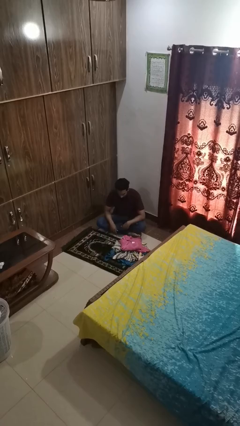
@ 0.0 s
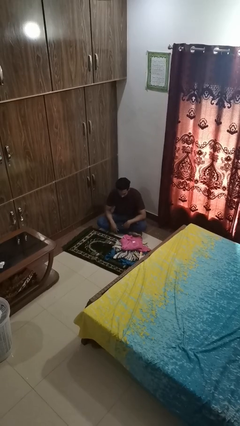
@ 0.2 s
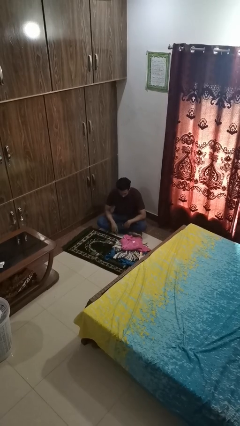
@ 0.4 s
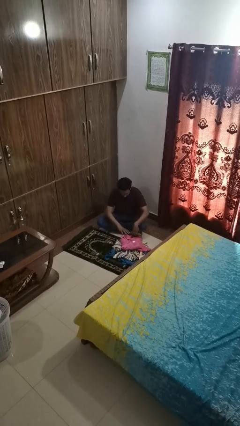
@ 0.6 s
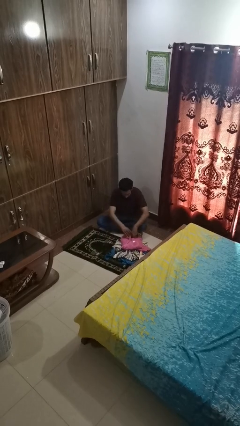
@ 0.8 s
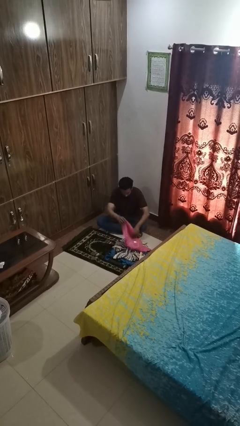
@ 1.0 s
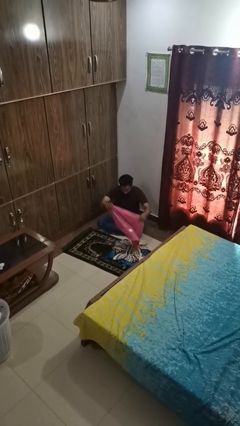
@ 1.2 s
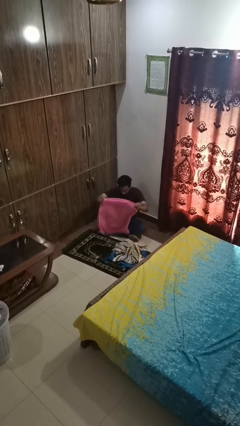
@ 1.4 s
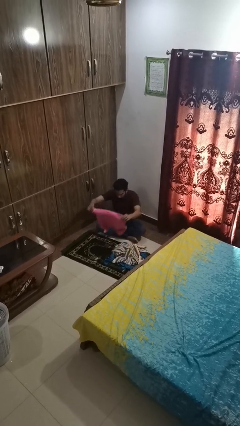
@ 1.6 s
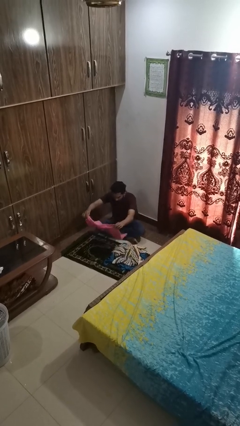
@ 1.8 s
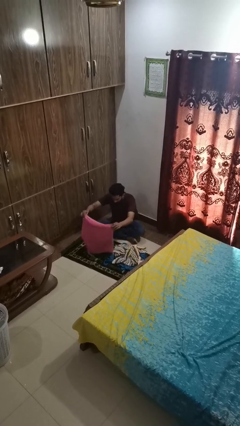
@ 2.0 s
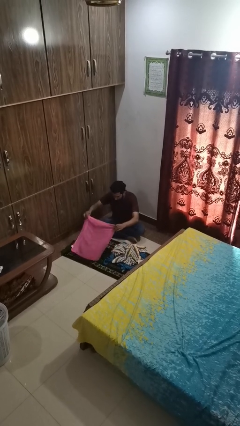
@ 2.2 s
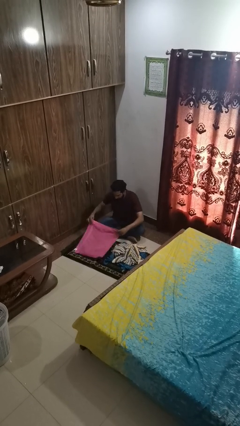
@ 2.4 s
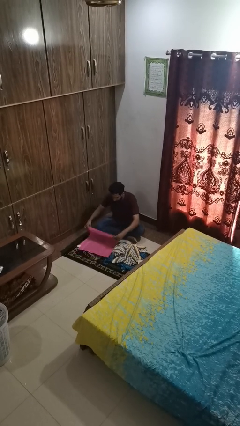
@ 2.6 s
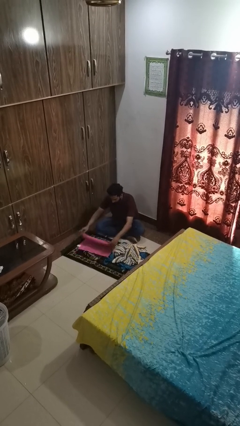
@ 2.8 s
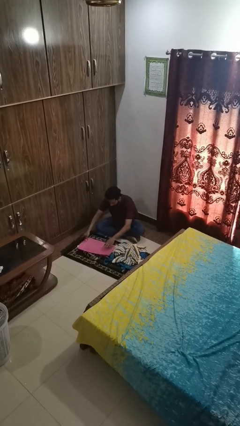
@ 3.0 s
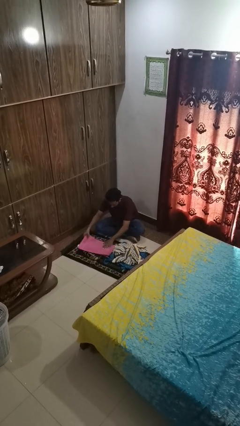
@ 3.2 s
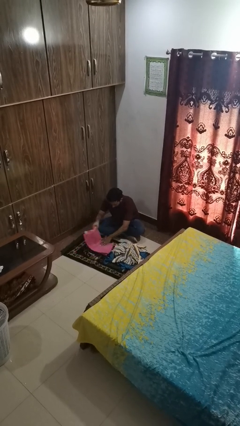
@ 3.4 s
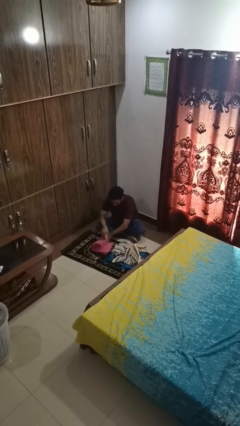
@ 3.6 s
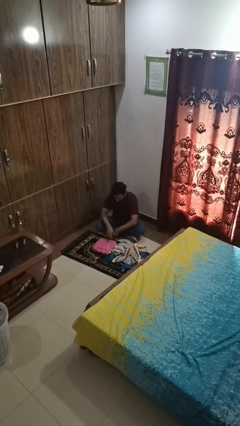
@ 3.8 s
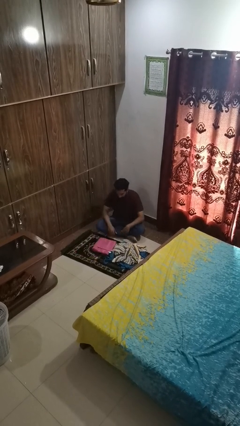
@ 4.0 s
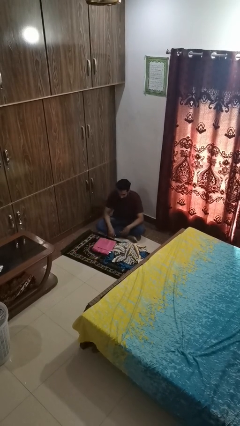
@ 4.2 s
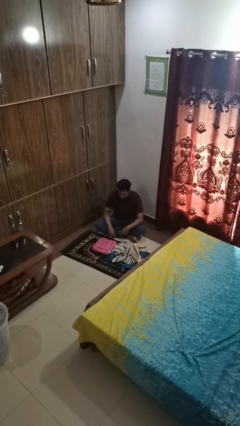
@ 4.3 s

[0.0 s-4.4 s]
person folds towel

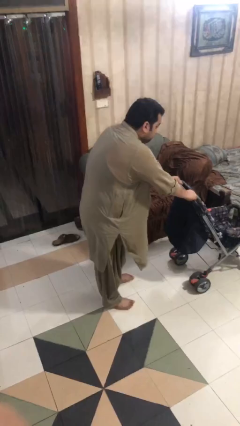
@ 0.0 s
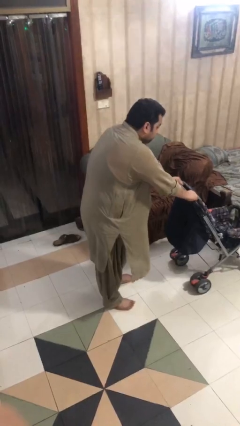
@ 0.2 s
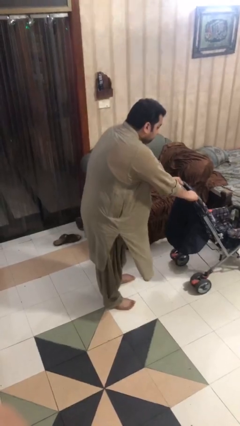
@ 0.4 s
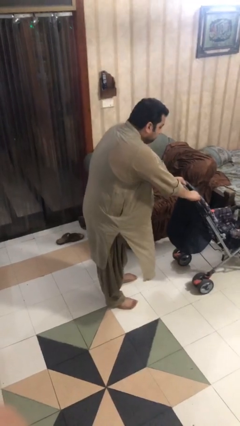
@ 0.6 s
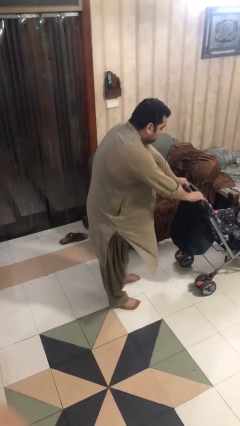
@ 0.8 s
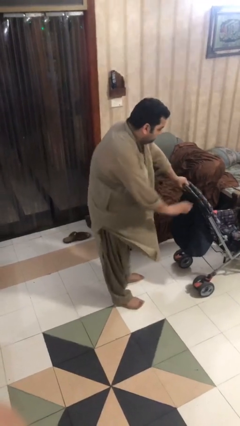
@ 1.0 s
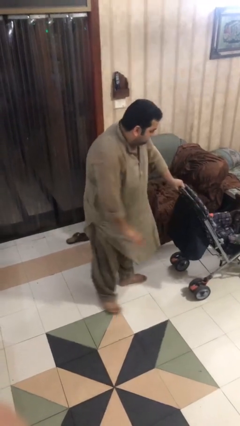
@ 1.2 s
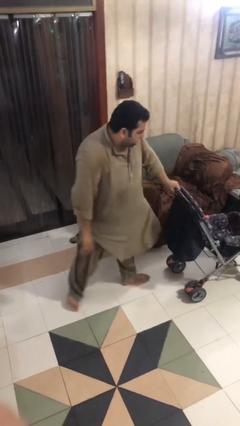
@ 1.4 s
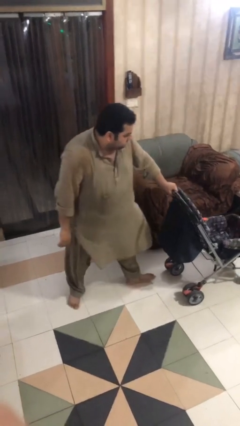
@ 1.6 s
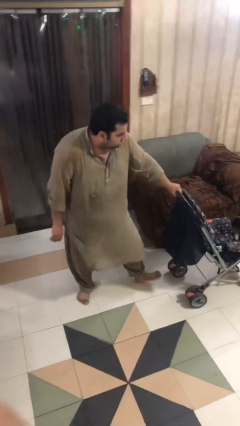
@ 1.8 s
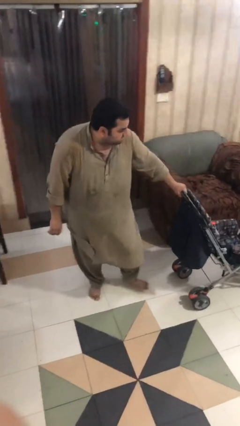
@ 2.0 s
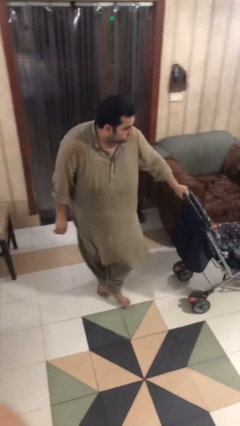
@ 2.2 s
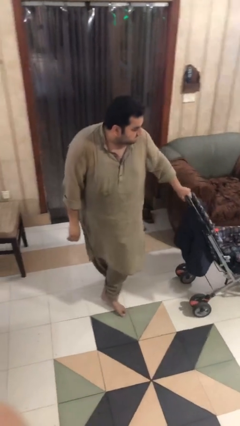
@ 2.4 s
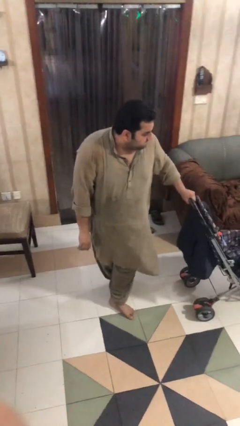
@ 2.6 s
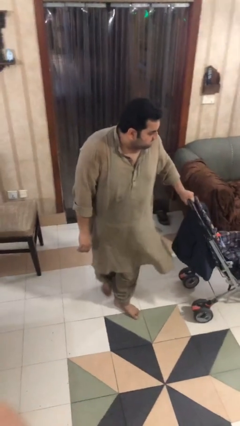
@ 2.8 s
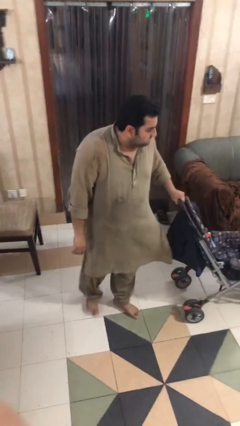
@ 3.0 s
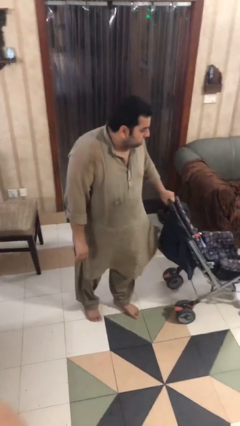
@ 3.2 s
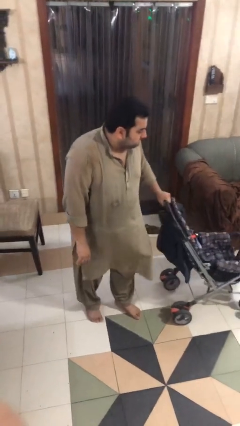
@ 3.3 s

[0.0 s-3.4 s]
person pulls wheeled cart

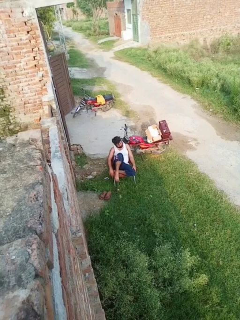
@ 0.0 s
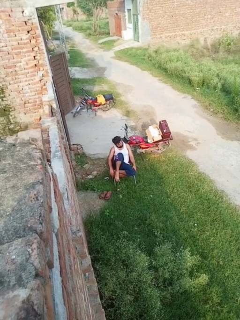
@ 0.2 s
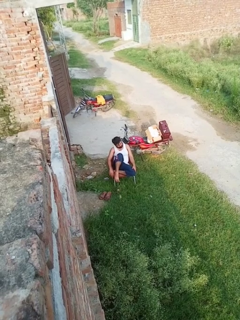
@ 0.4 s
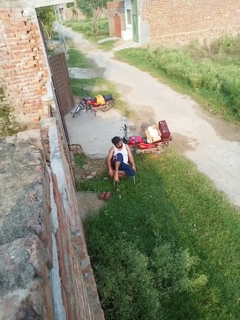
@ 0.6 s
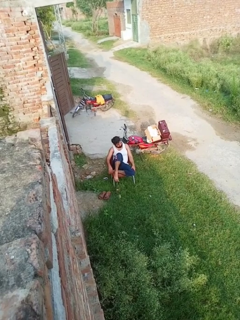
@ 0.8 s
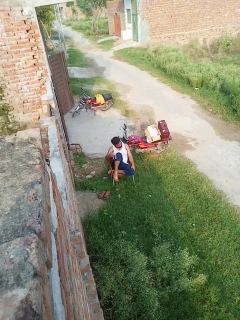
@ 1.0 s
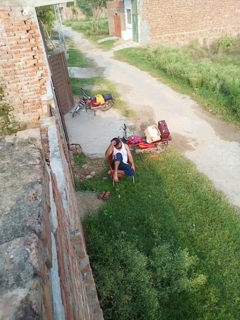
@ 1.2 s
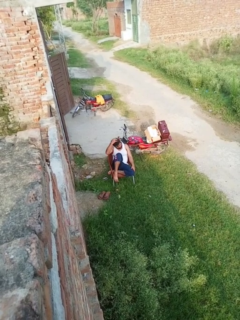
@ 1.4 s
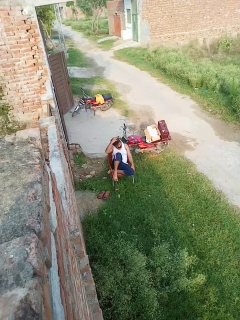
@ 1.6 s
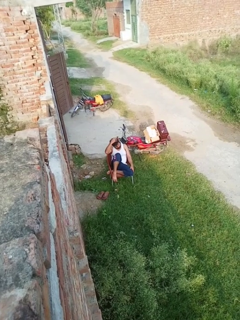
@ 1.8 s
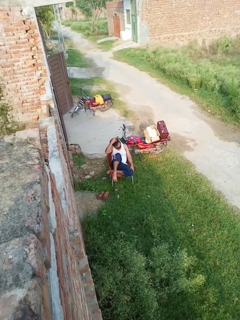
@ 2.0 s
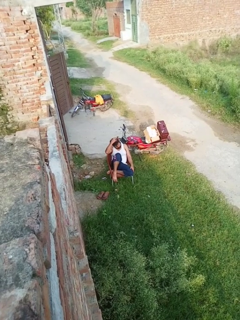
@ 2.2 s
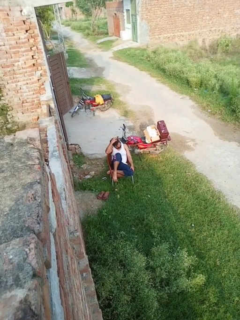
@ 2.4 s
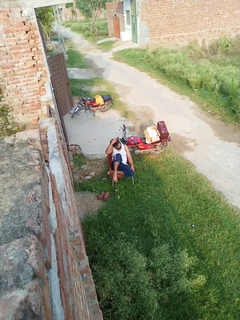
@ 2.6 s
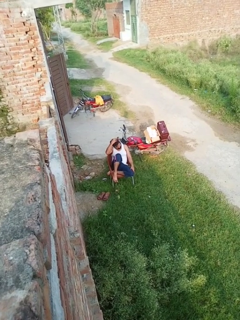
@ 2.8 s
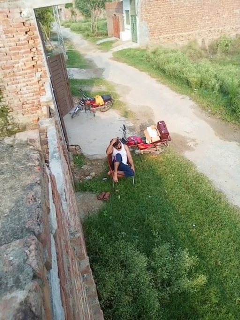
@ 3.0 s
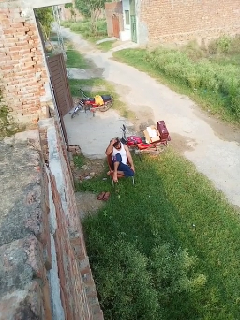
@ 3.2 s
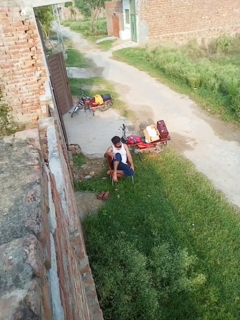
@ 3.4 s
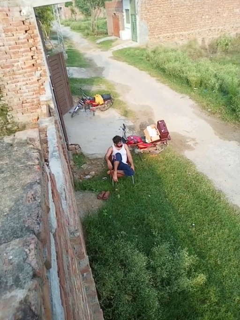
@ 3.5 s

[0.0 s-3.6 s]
person scratches face

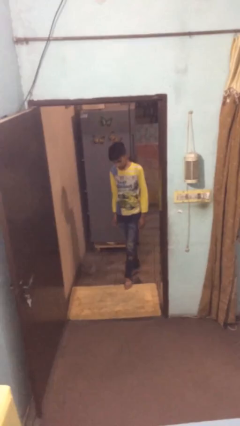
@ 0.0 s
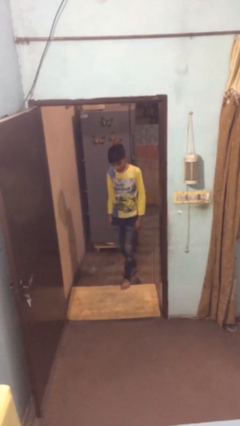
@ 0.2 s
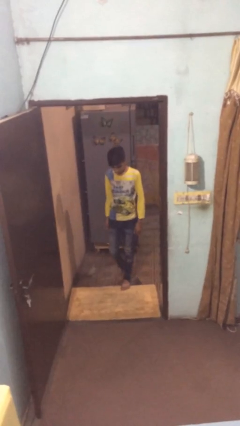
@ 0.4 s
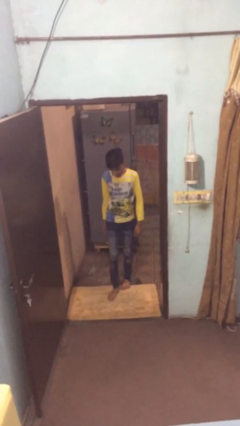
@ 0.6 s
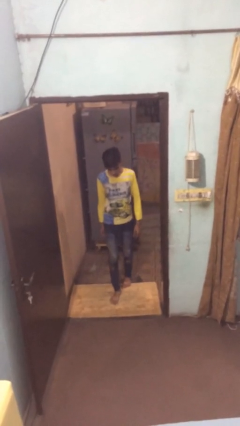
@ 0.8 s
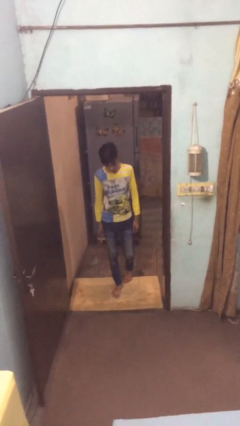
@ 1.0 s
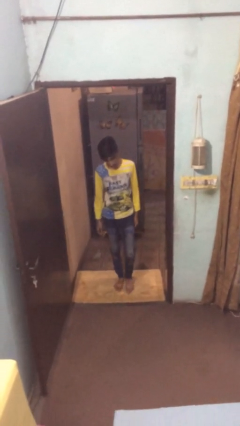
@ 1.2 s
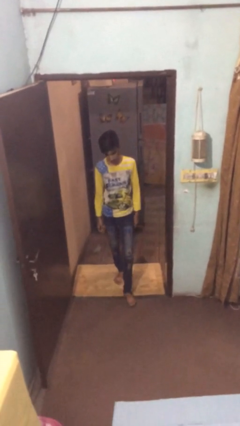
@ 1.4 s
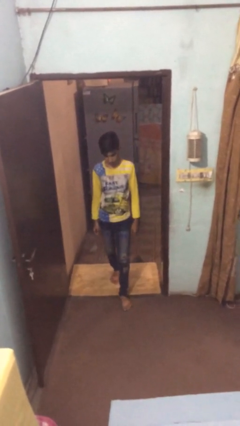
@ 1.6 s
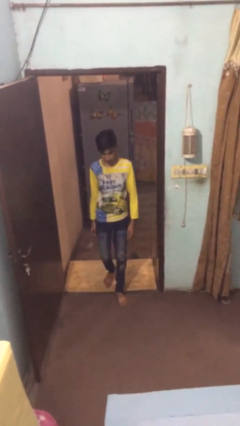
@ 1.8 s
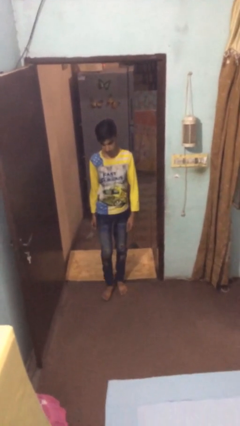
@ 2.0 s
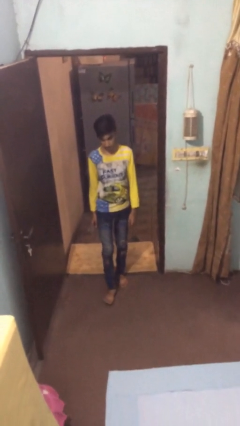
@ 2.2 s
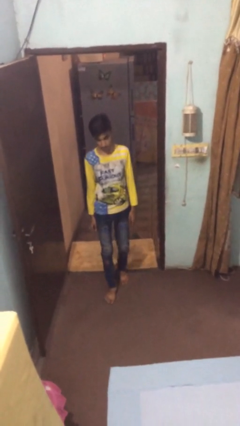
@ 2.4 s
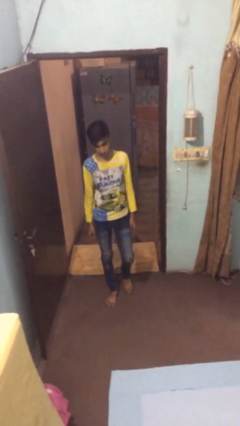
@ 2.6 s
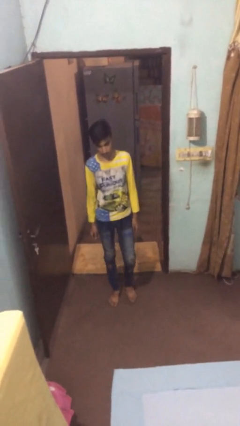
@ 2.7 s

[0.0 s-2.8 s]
person enters scene through structure

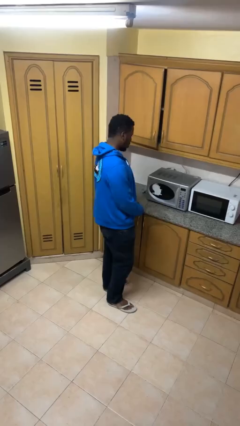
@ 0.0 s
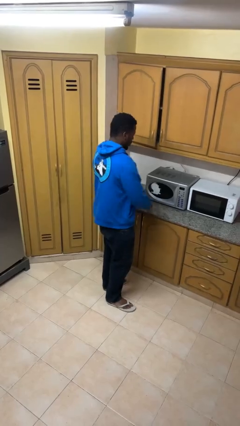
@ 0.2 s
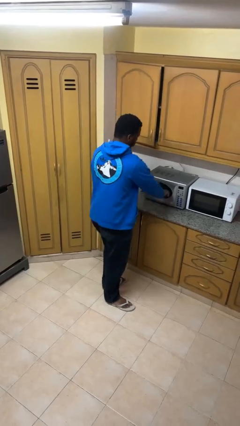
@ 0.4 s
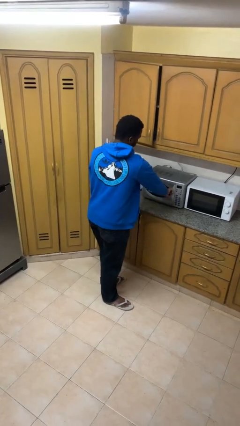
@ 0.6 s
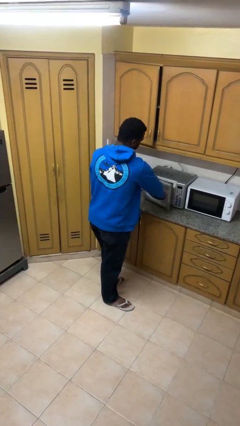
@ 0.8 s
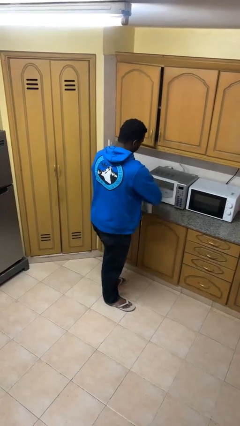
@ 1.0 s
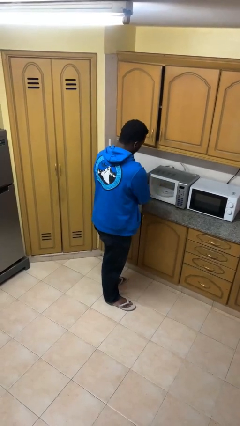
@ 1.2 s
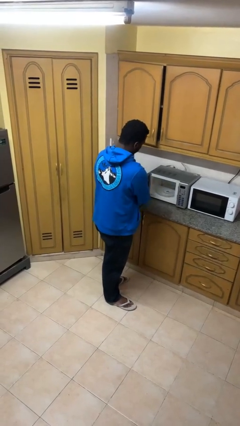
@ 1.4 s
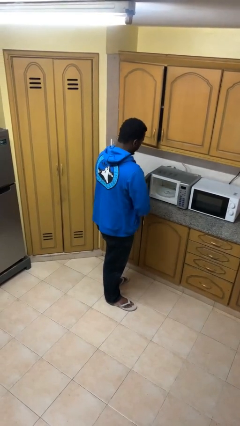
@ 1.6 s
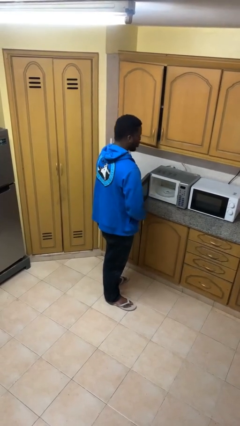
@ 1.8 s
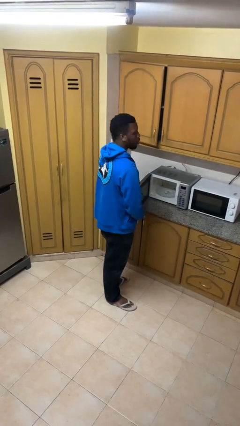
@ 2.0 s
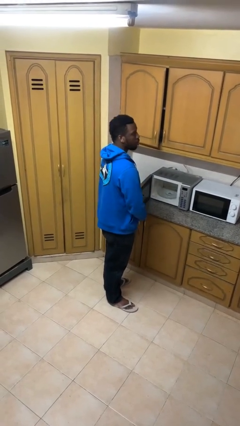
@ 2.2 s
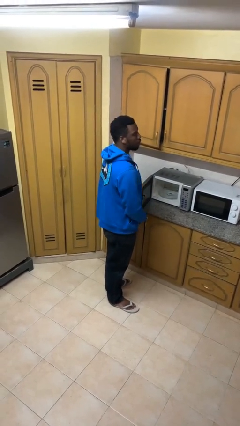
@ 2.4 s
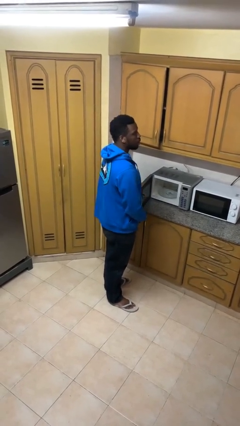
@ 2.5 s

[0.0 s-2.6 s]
person opens microwave

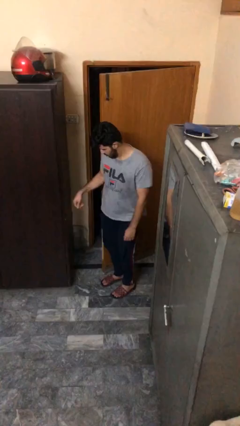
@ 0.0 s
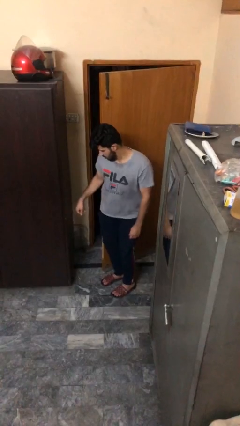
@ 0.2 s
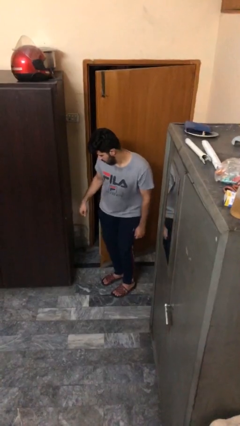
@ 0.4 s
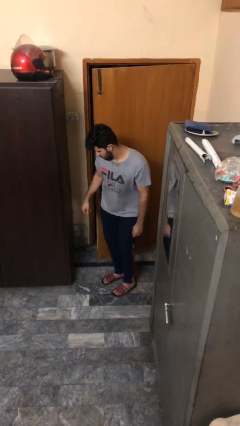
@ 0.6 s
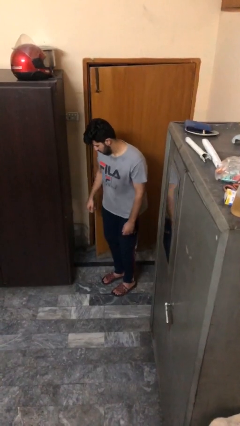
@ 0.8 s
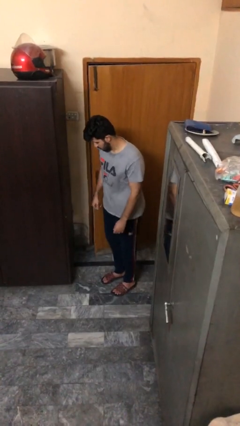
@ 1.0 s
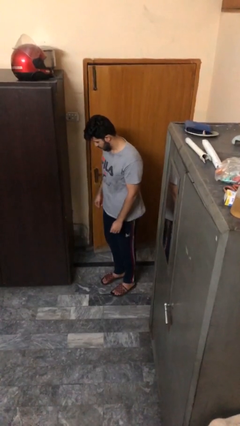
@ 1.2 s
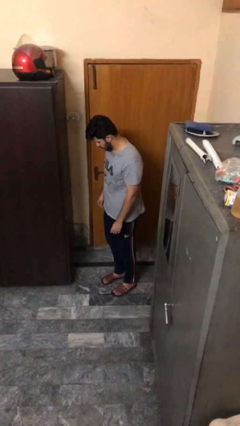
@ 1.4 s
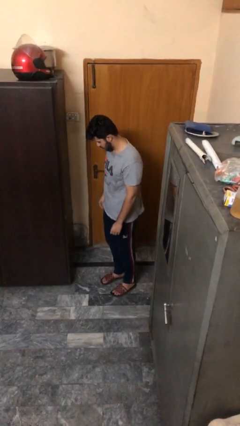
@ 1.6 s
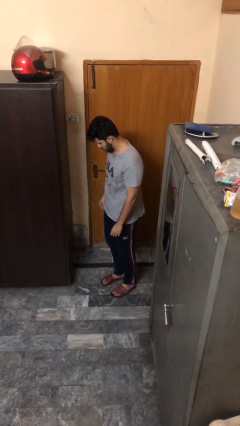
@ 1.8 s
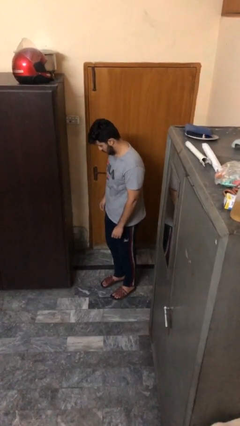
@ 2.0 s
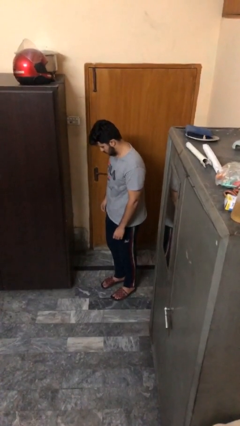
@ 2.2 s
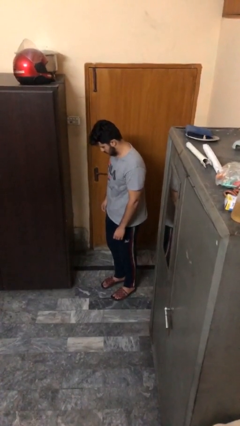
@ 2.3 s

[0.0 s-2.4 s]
person closes door with hip